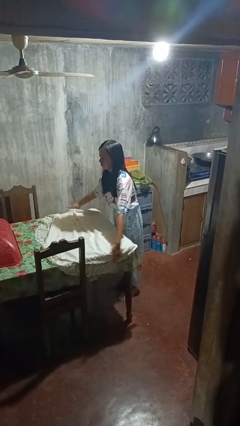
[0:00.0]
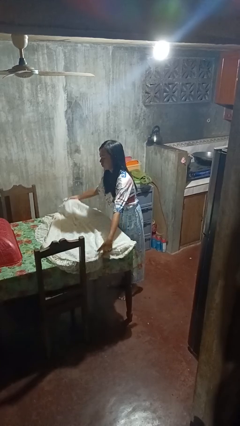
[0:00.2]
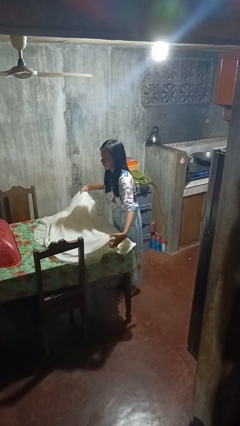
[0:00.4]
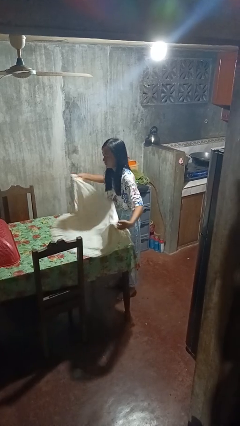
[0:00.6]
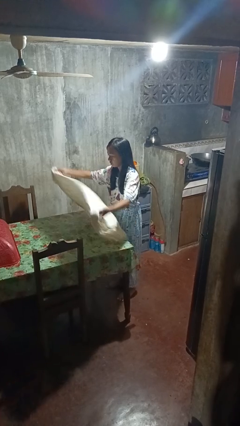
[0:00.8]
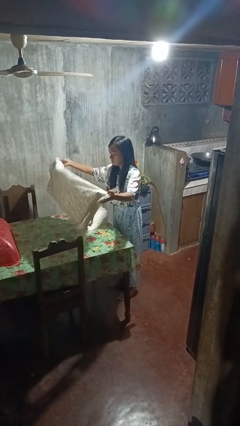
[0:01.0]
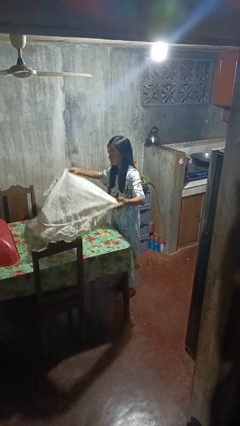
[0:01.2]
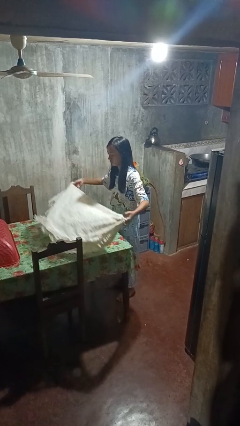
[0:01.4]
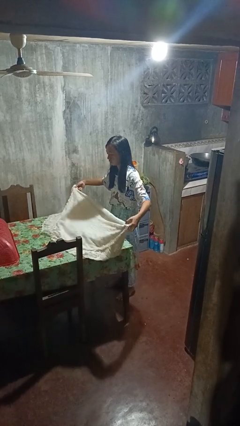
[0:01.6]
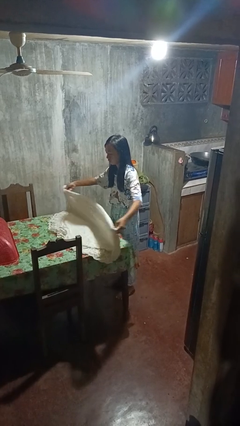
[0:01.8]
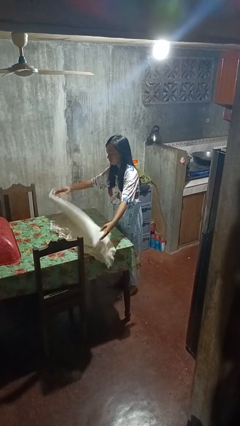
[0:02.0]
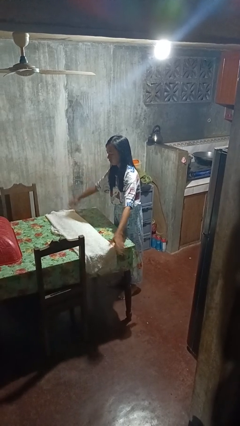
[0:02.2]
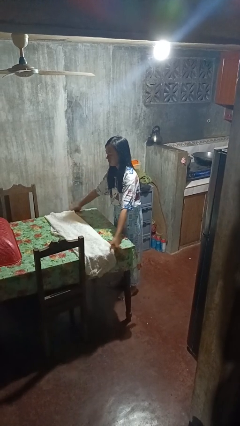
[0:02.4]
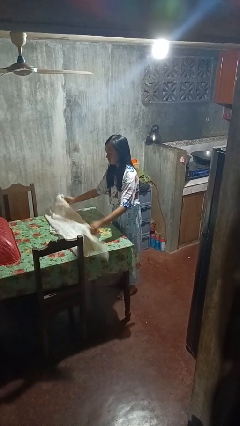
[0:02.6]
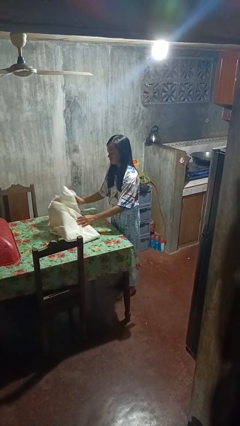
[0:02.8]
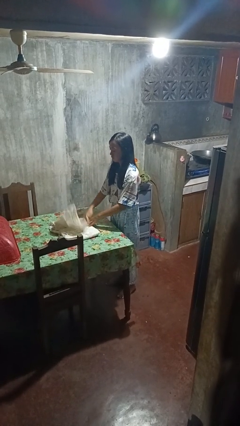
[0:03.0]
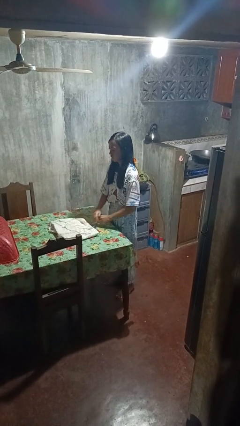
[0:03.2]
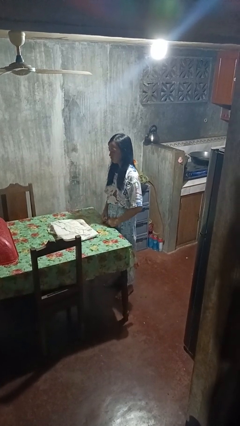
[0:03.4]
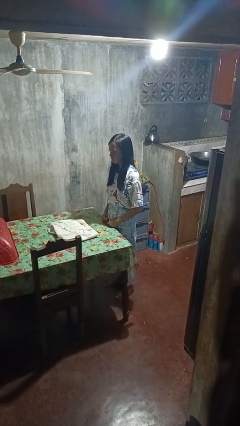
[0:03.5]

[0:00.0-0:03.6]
person folds tablecloth

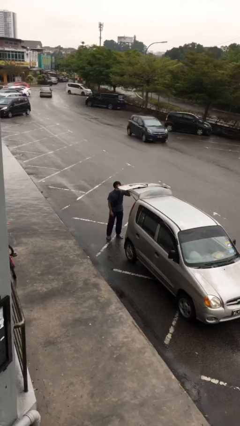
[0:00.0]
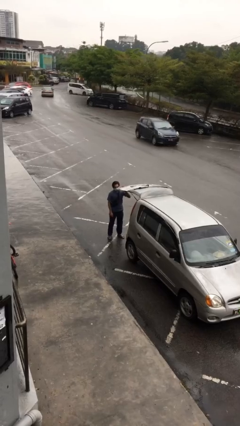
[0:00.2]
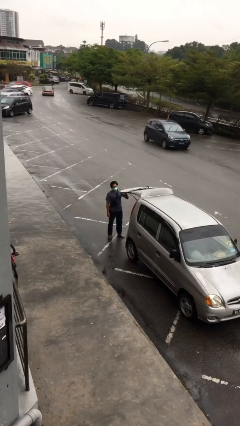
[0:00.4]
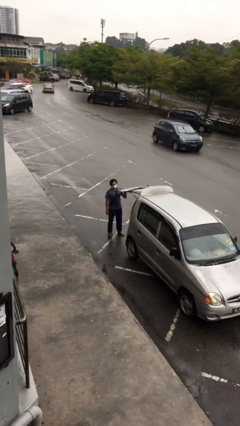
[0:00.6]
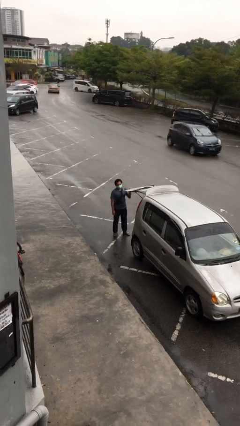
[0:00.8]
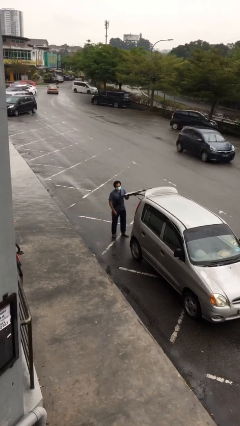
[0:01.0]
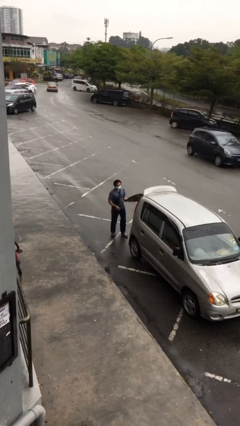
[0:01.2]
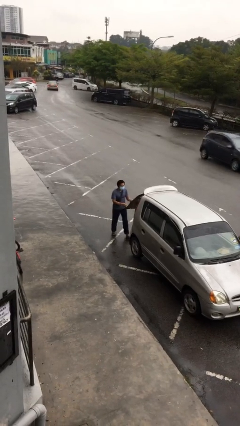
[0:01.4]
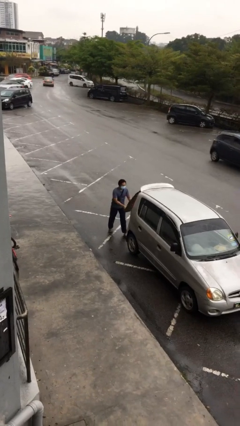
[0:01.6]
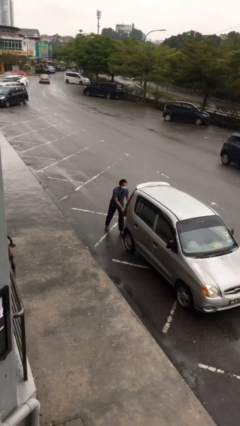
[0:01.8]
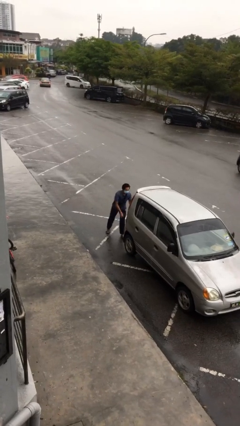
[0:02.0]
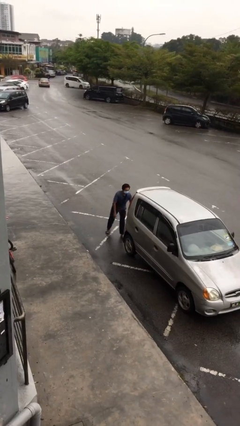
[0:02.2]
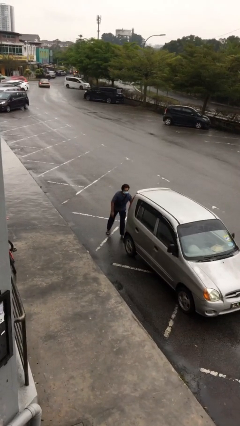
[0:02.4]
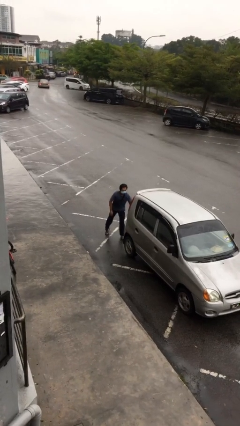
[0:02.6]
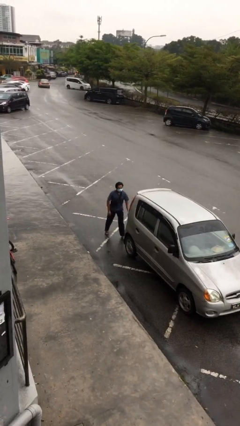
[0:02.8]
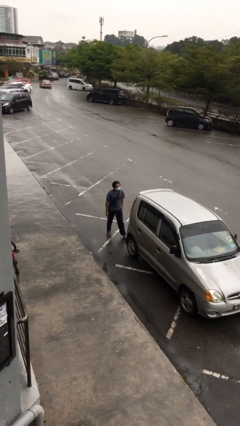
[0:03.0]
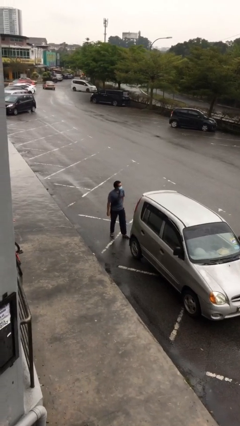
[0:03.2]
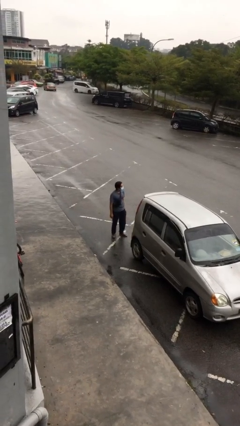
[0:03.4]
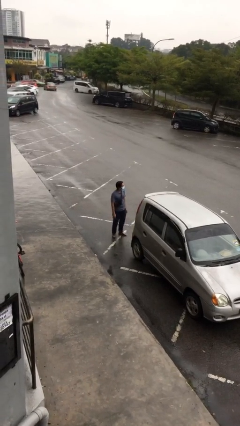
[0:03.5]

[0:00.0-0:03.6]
person closes car trunk

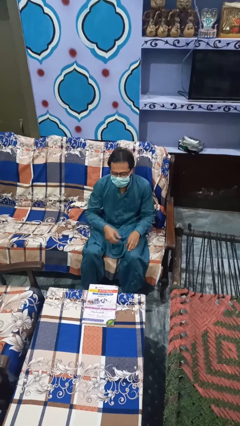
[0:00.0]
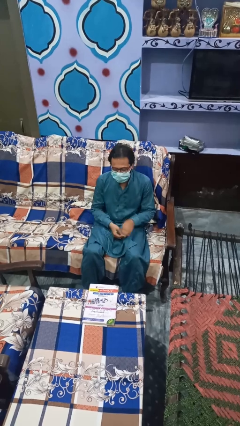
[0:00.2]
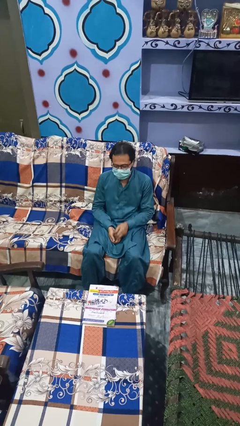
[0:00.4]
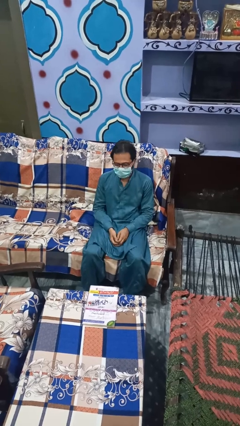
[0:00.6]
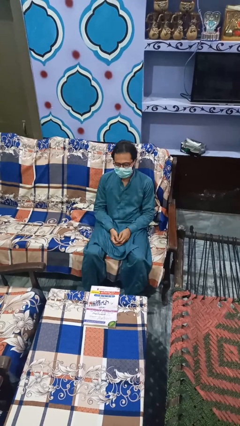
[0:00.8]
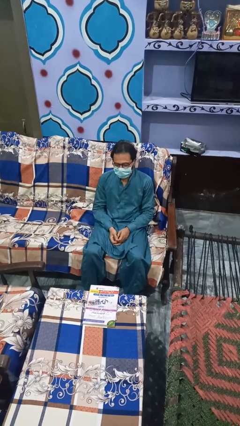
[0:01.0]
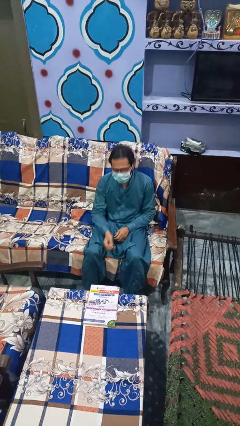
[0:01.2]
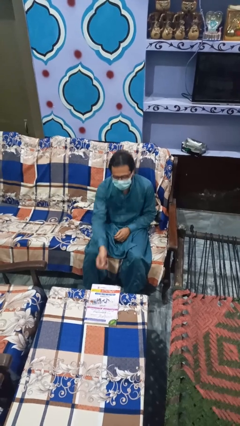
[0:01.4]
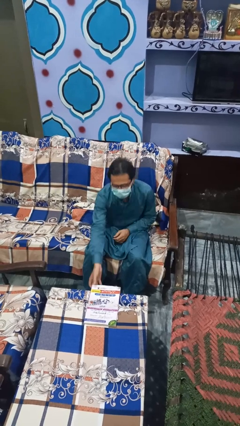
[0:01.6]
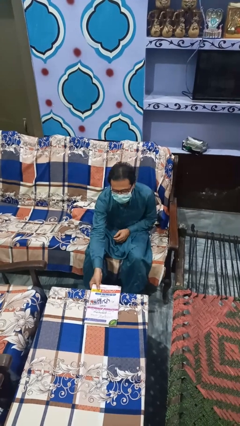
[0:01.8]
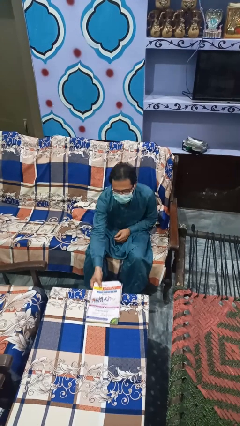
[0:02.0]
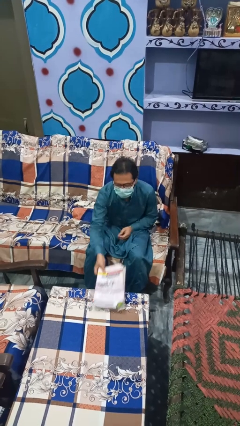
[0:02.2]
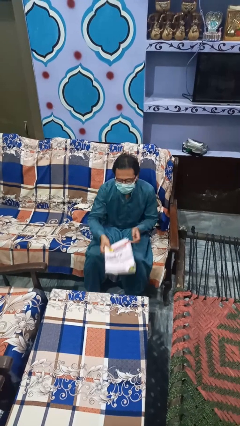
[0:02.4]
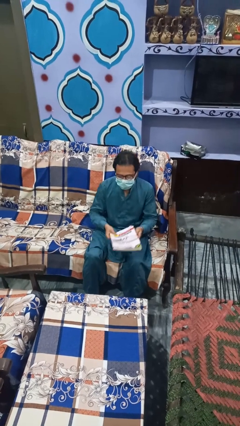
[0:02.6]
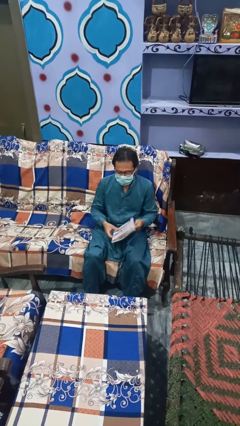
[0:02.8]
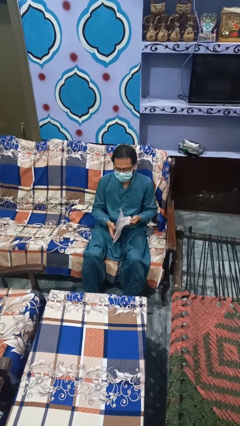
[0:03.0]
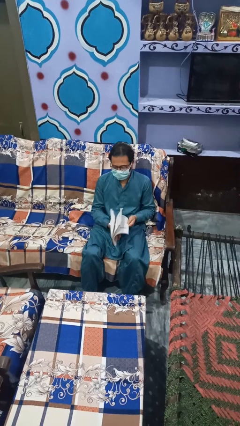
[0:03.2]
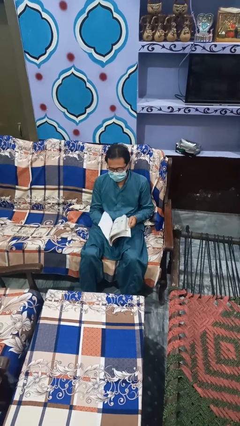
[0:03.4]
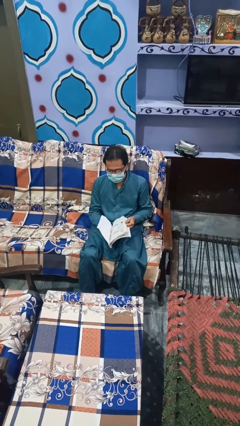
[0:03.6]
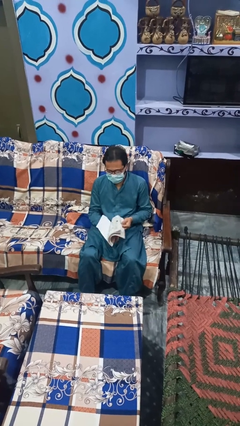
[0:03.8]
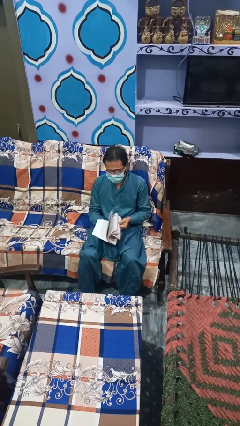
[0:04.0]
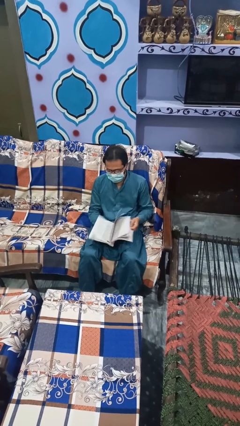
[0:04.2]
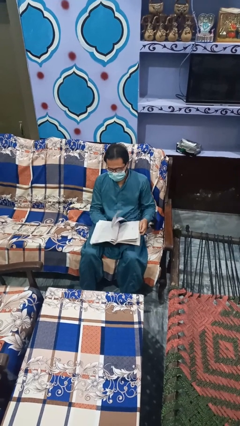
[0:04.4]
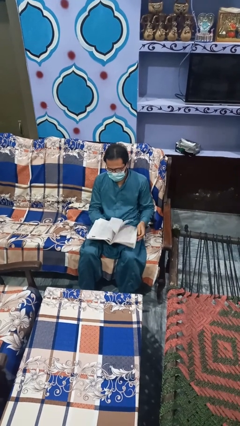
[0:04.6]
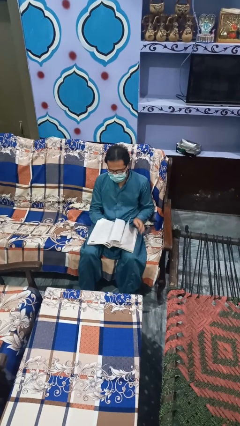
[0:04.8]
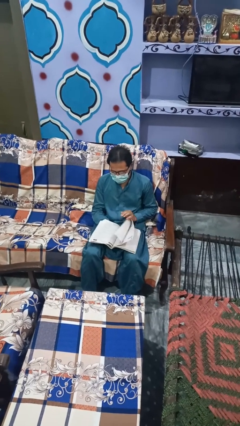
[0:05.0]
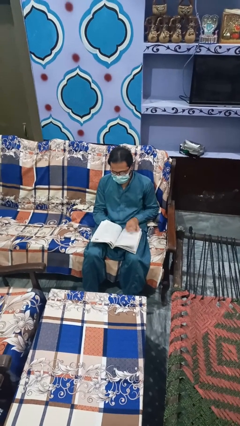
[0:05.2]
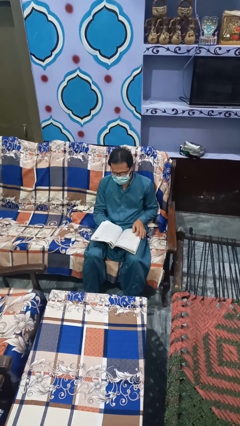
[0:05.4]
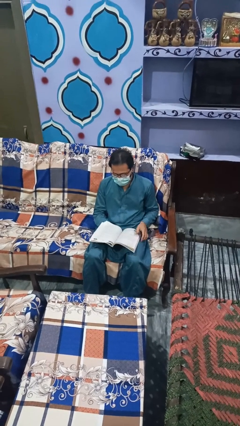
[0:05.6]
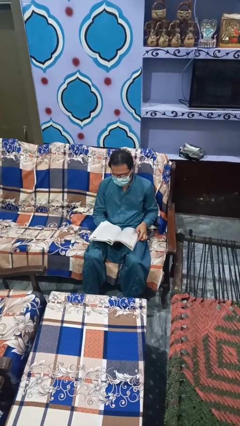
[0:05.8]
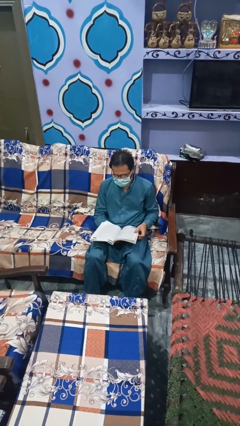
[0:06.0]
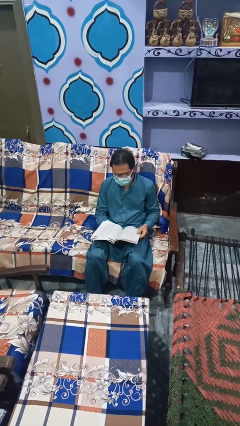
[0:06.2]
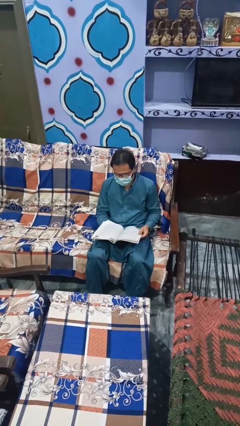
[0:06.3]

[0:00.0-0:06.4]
person reads magazine

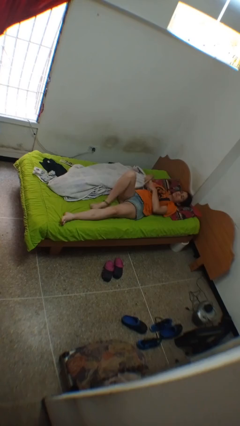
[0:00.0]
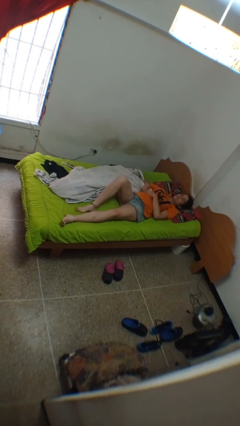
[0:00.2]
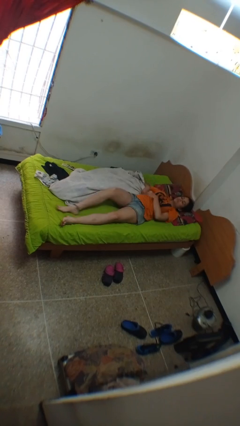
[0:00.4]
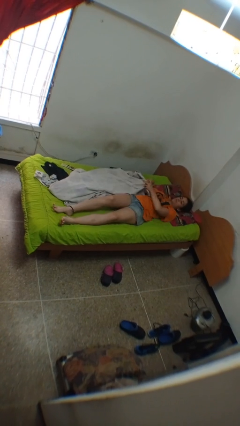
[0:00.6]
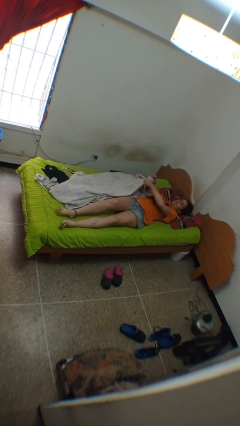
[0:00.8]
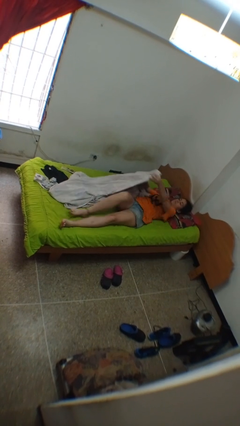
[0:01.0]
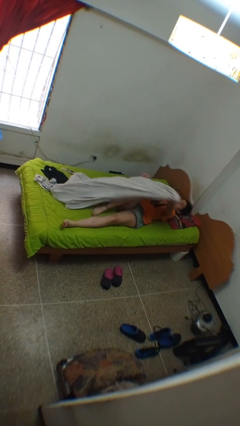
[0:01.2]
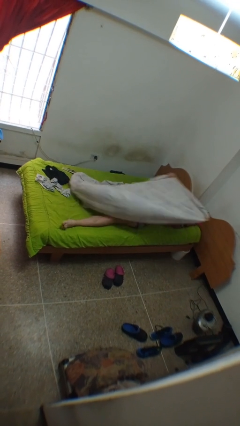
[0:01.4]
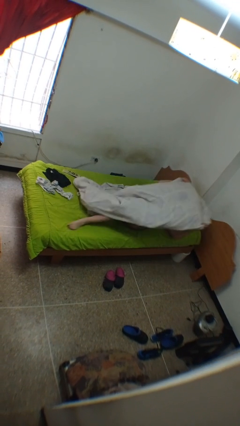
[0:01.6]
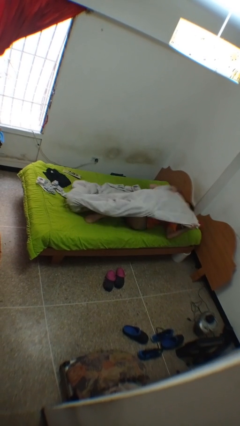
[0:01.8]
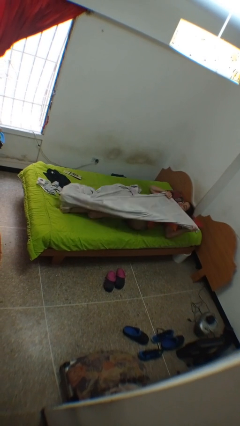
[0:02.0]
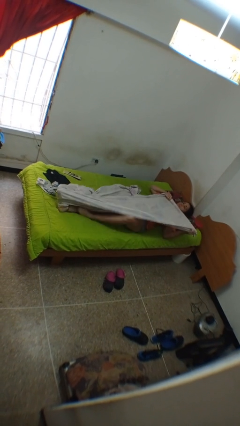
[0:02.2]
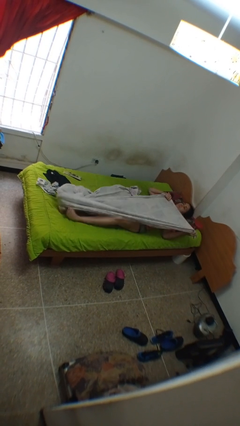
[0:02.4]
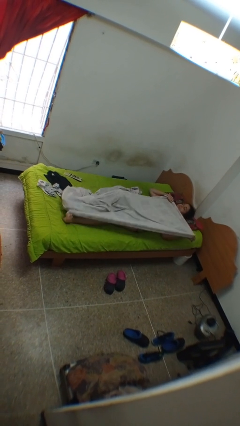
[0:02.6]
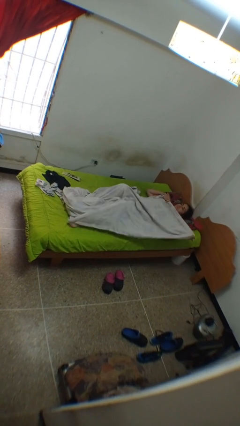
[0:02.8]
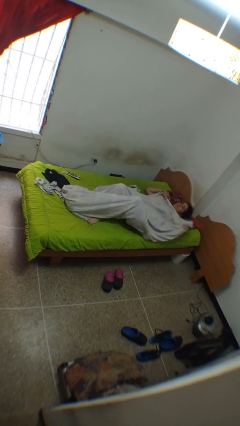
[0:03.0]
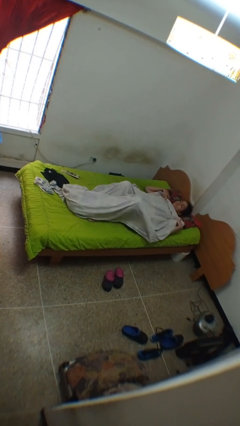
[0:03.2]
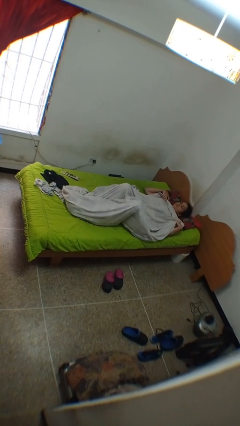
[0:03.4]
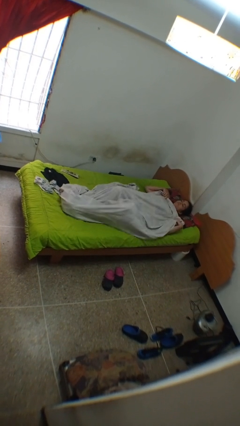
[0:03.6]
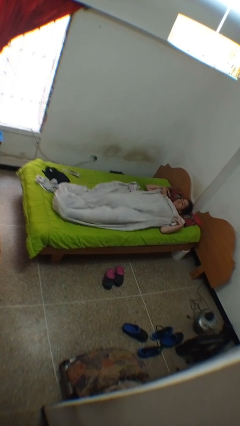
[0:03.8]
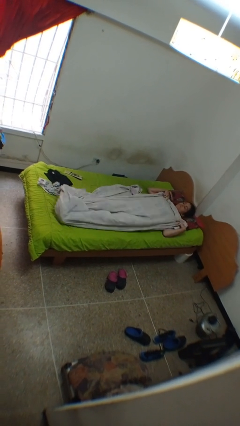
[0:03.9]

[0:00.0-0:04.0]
person covers with bedsheets

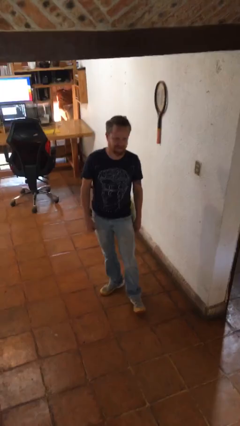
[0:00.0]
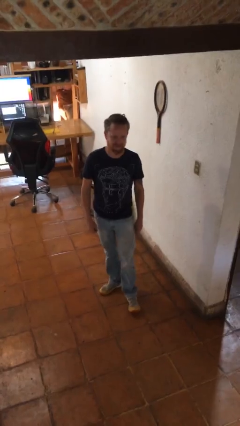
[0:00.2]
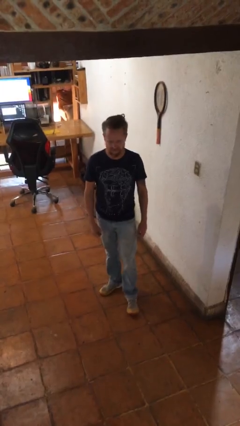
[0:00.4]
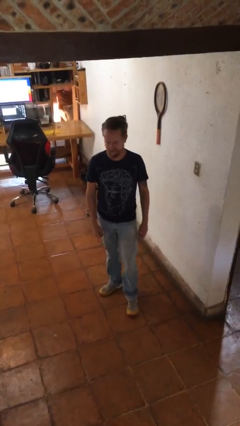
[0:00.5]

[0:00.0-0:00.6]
person gestures peace
